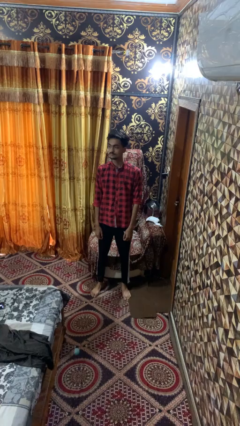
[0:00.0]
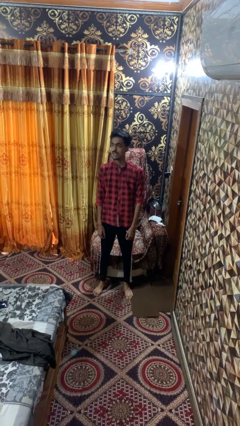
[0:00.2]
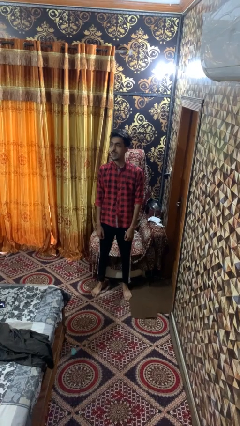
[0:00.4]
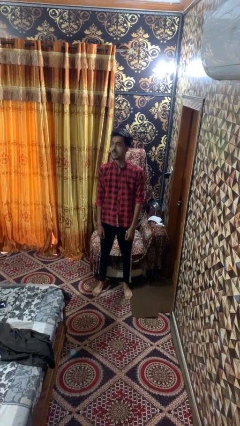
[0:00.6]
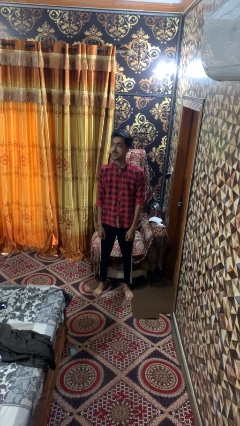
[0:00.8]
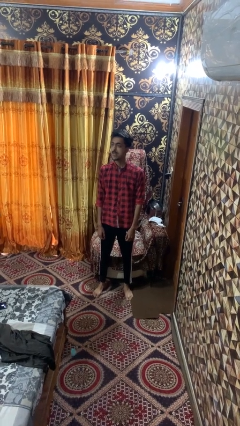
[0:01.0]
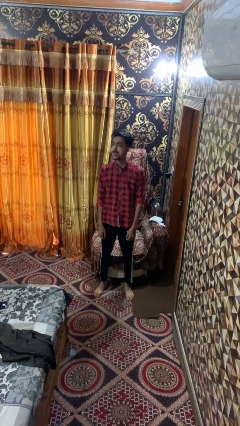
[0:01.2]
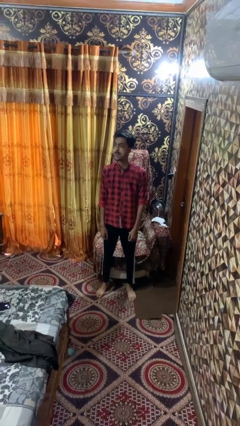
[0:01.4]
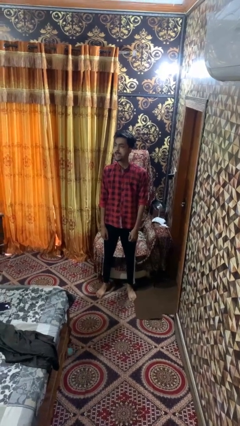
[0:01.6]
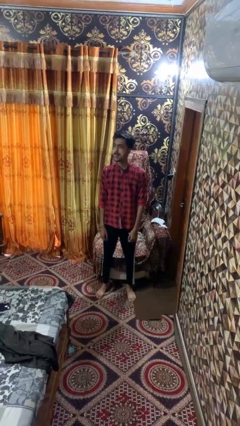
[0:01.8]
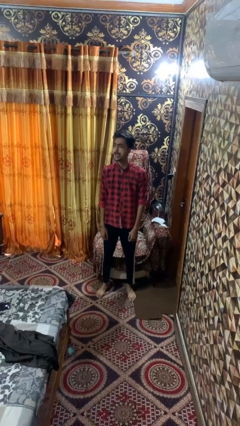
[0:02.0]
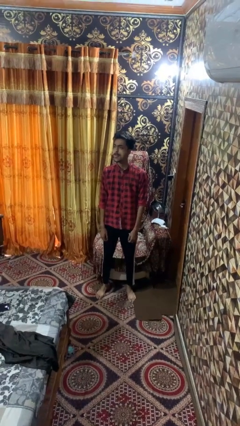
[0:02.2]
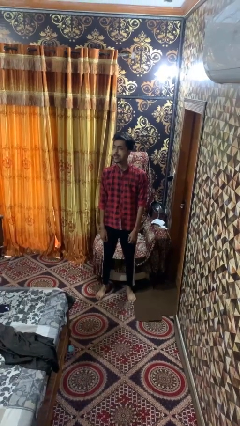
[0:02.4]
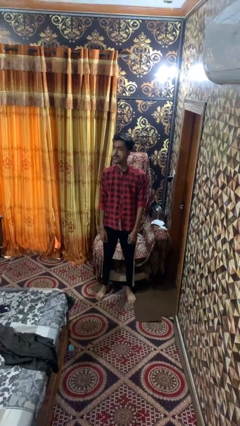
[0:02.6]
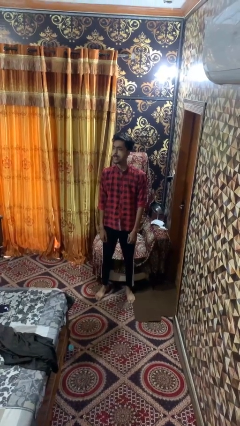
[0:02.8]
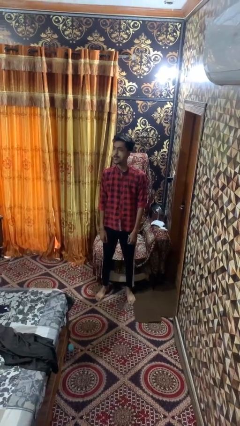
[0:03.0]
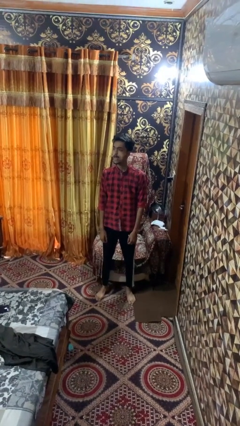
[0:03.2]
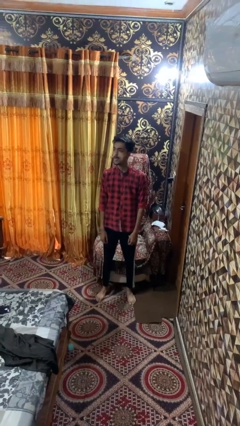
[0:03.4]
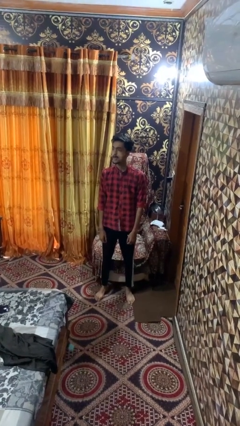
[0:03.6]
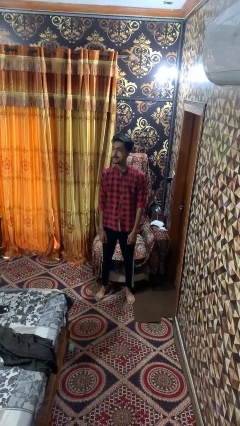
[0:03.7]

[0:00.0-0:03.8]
person sticks out tongue

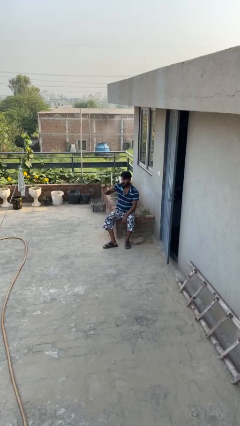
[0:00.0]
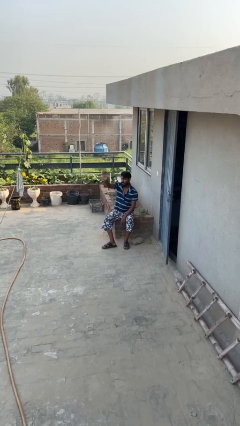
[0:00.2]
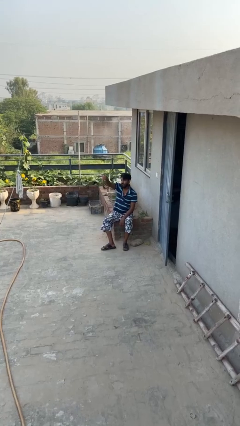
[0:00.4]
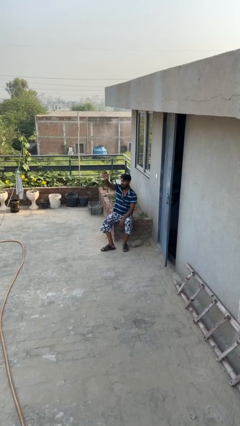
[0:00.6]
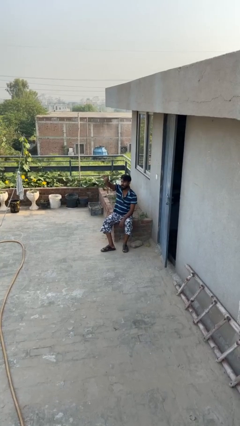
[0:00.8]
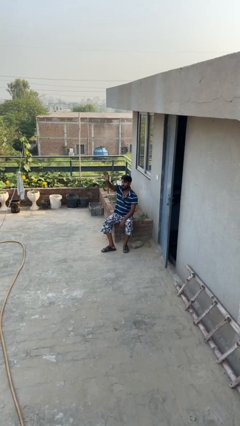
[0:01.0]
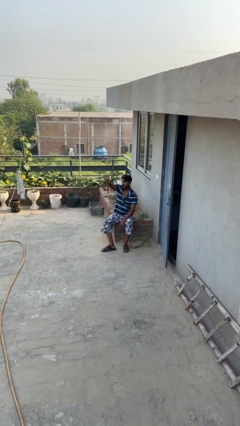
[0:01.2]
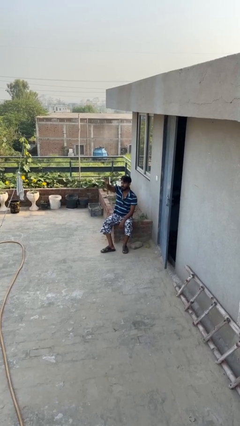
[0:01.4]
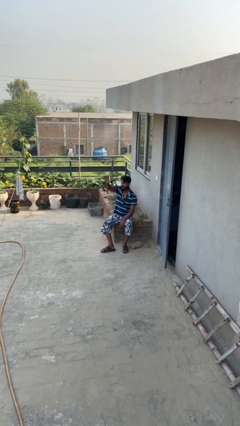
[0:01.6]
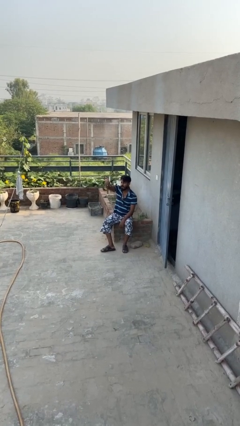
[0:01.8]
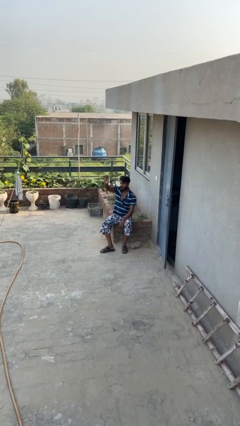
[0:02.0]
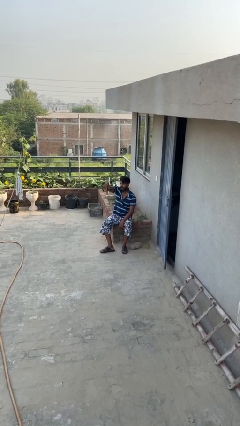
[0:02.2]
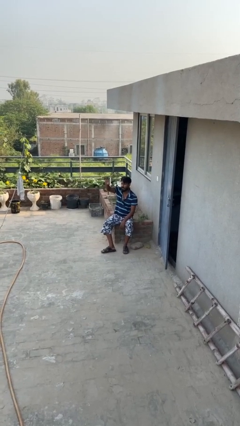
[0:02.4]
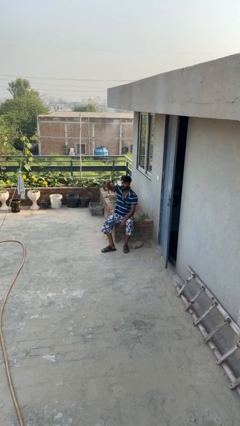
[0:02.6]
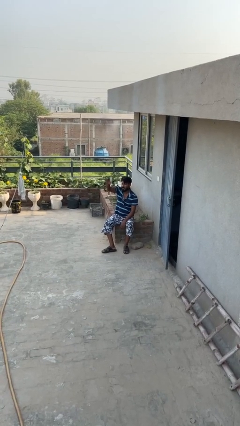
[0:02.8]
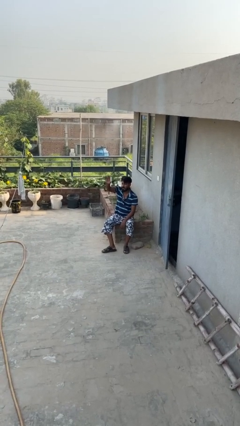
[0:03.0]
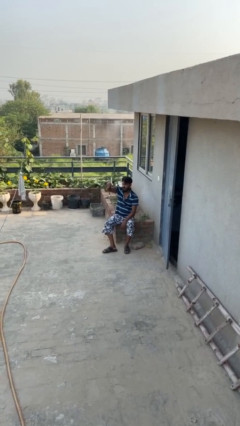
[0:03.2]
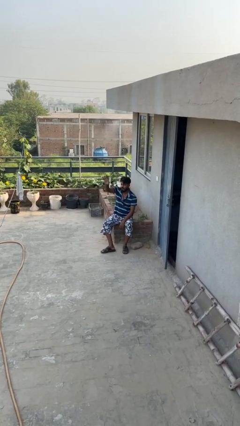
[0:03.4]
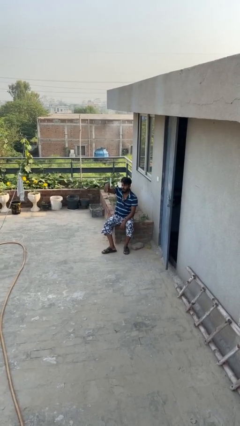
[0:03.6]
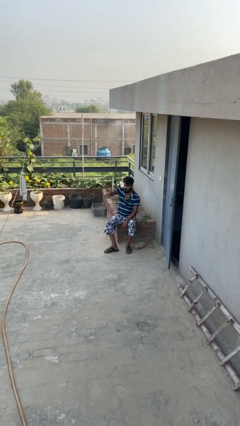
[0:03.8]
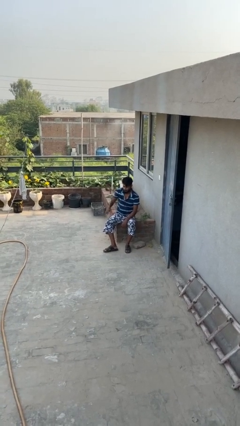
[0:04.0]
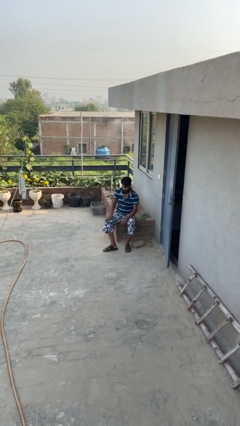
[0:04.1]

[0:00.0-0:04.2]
person gestures come here

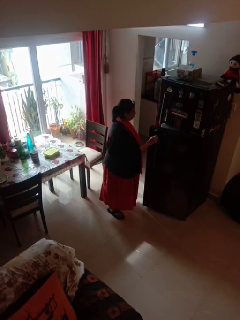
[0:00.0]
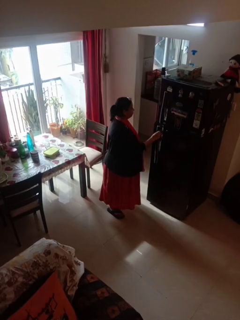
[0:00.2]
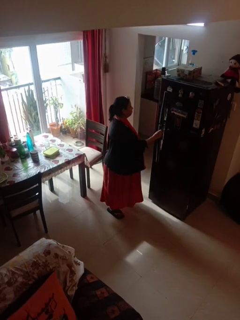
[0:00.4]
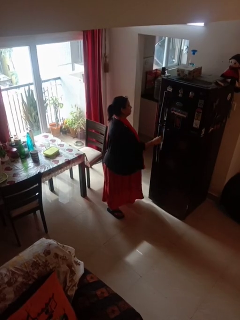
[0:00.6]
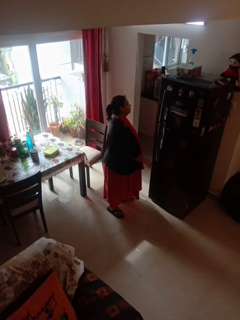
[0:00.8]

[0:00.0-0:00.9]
person closes refrigerator

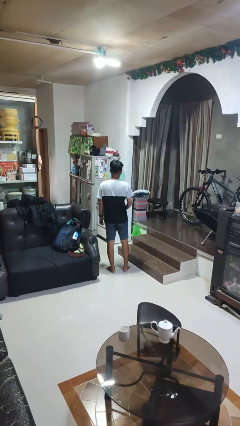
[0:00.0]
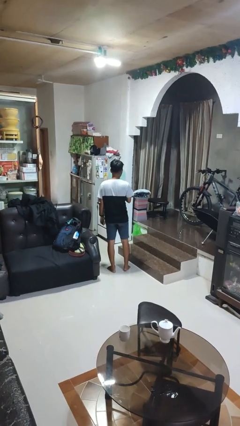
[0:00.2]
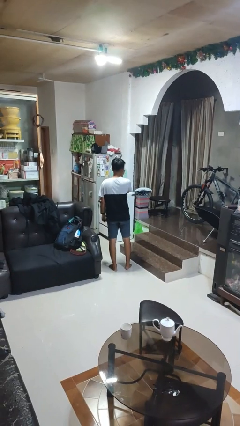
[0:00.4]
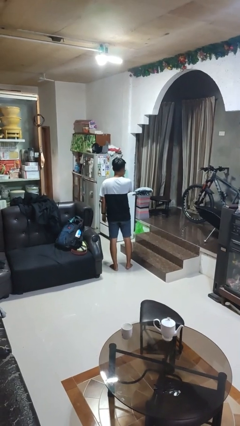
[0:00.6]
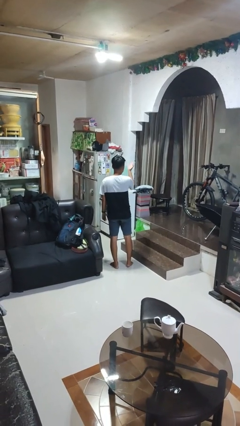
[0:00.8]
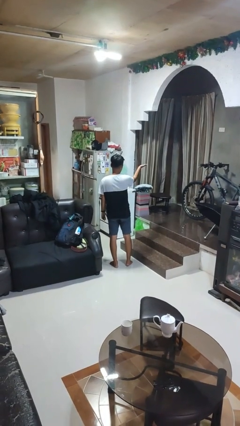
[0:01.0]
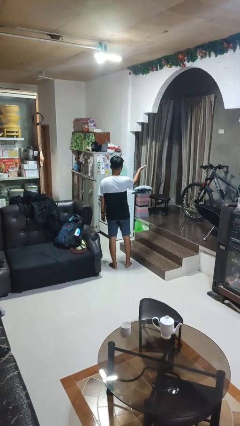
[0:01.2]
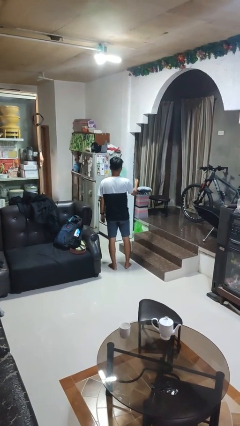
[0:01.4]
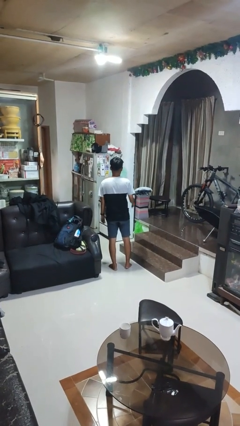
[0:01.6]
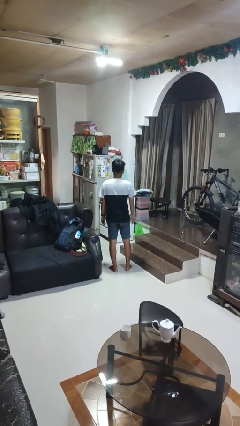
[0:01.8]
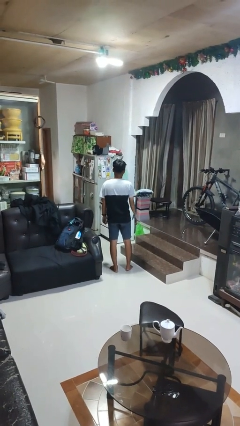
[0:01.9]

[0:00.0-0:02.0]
person gestures blow kiss

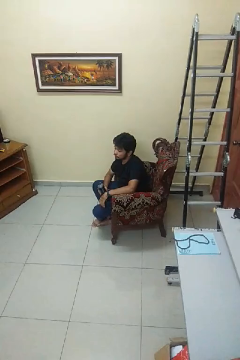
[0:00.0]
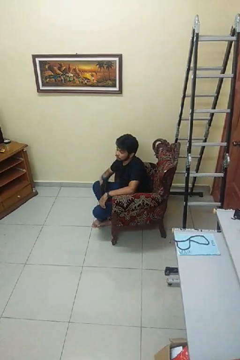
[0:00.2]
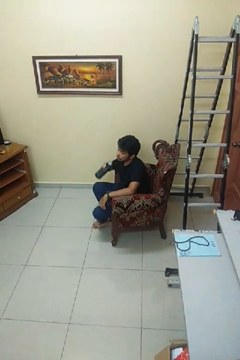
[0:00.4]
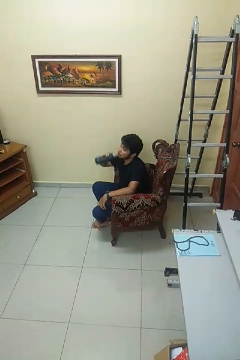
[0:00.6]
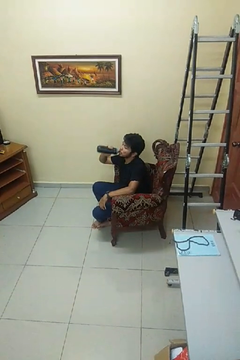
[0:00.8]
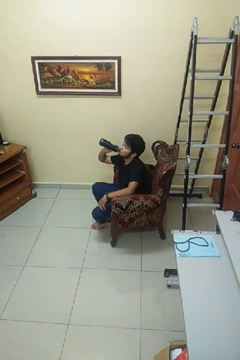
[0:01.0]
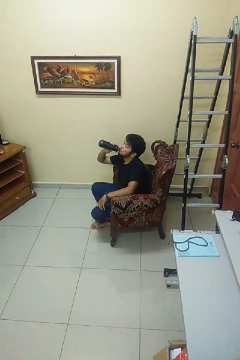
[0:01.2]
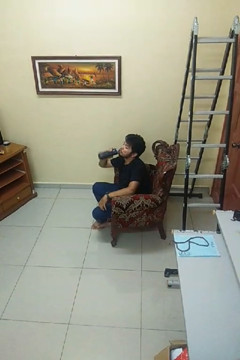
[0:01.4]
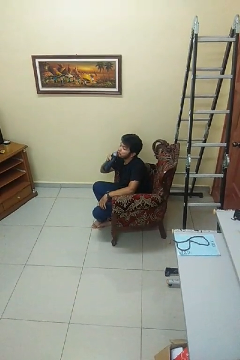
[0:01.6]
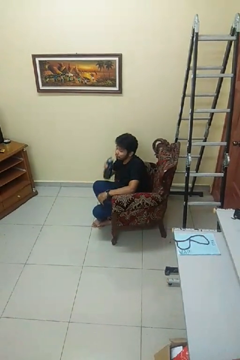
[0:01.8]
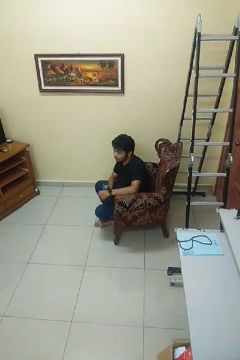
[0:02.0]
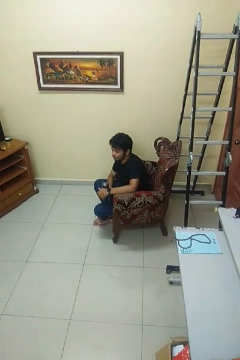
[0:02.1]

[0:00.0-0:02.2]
person drinks from bottle

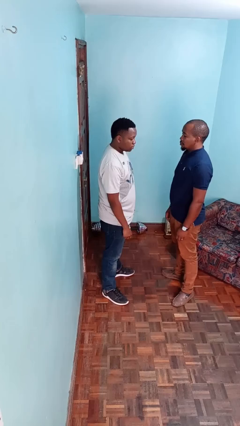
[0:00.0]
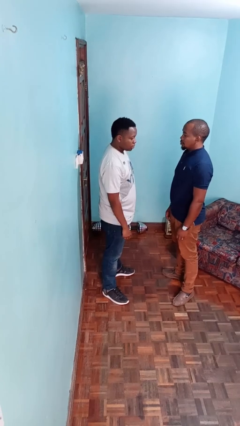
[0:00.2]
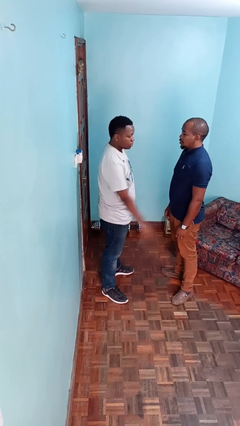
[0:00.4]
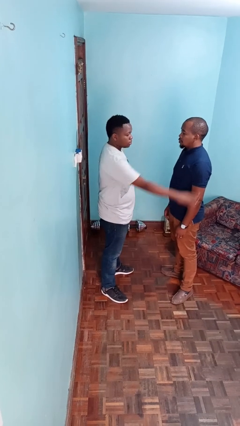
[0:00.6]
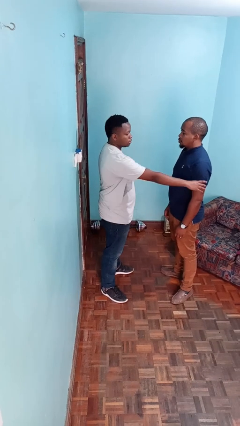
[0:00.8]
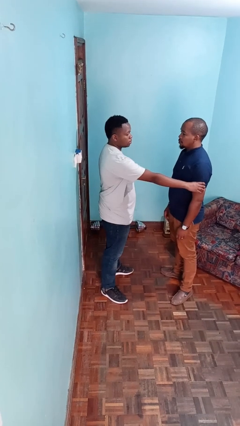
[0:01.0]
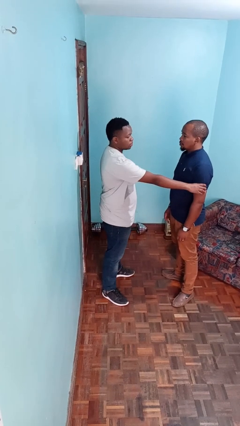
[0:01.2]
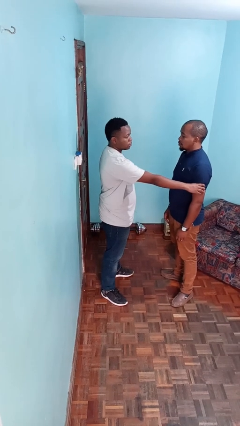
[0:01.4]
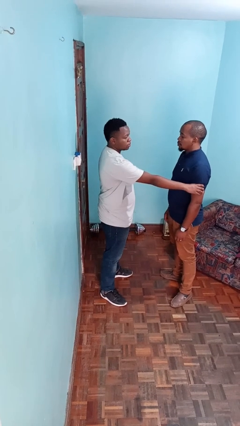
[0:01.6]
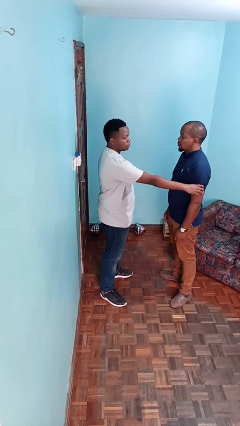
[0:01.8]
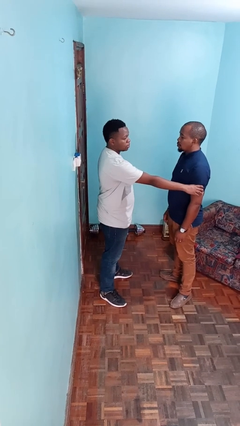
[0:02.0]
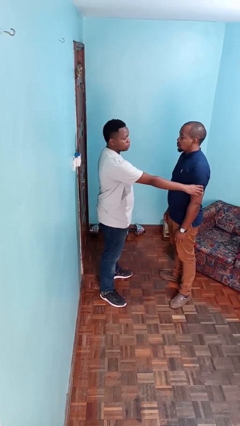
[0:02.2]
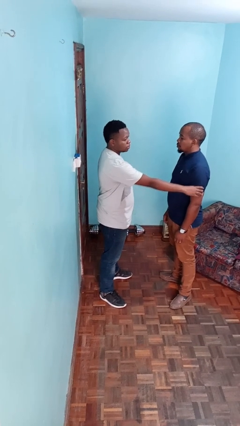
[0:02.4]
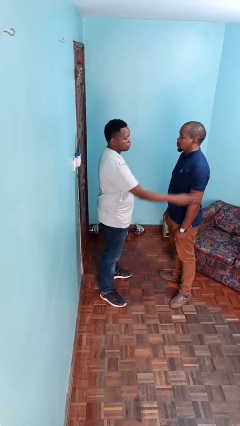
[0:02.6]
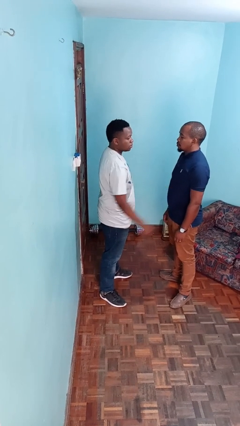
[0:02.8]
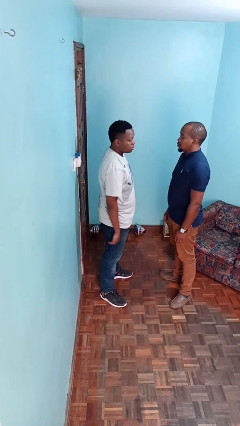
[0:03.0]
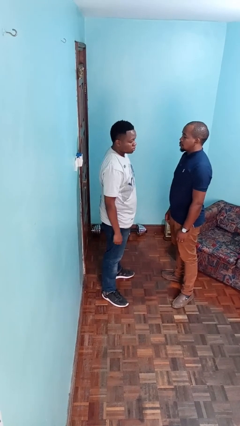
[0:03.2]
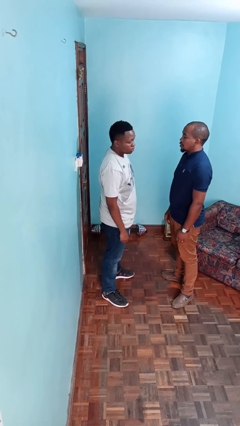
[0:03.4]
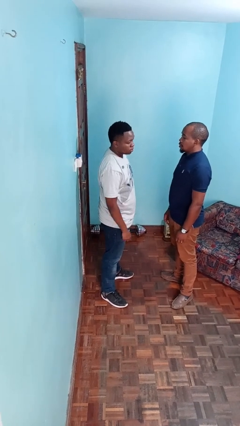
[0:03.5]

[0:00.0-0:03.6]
person grabs person by bicep

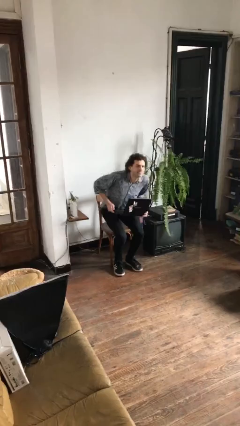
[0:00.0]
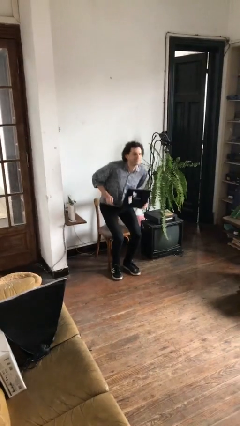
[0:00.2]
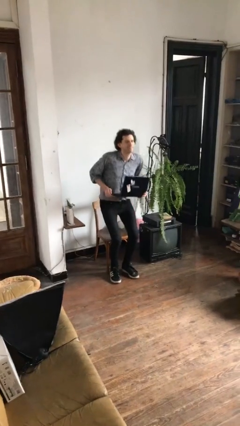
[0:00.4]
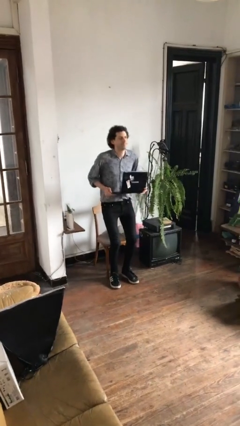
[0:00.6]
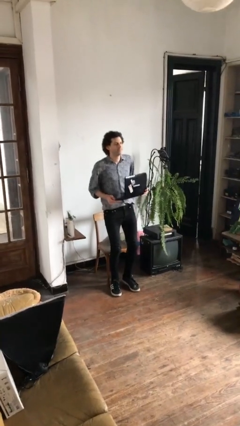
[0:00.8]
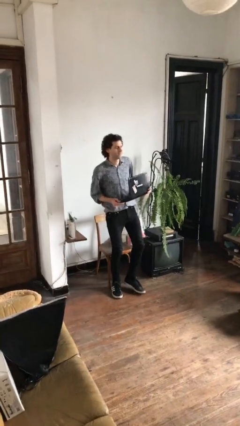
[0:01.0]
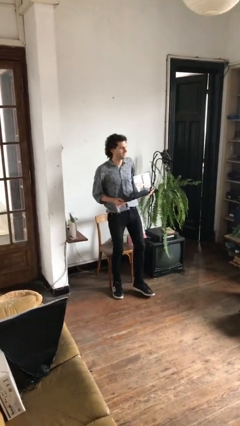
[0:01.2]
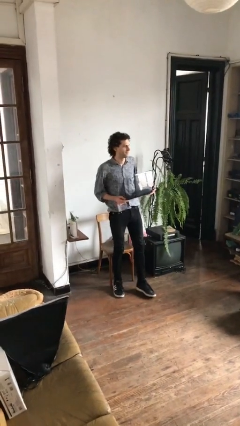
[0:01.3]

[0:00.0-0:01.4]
person stands up
